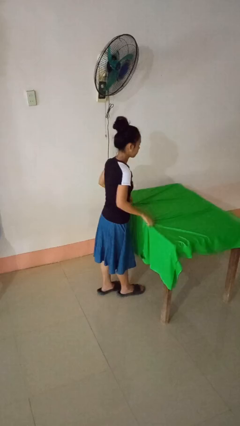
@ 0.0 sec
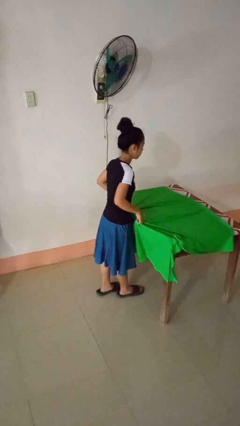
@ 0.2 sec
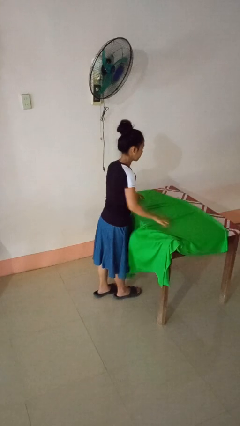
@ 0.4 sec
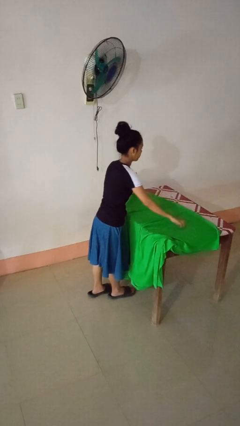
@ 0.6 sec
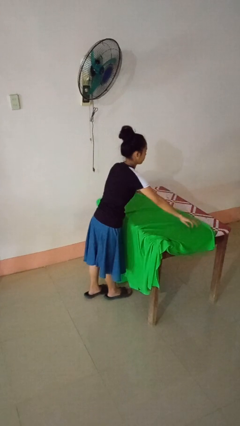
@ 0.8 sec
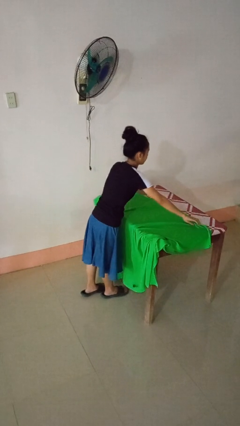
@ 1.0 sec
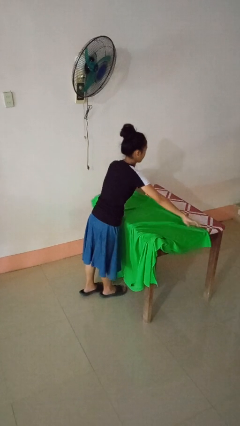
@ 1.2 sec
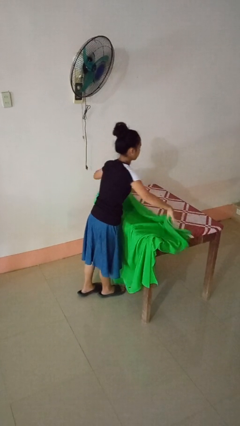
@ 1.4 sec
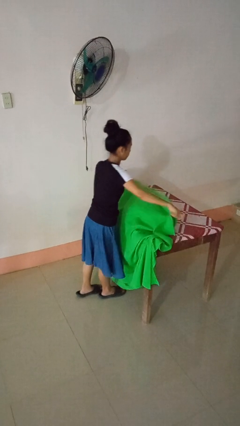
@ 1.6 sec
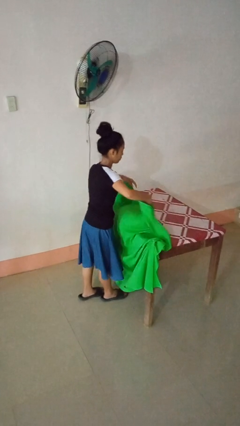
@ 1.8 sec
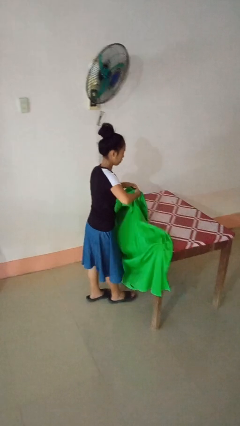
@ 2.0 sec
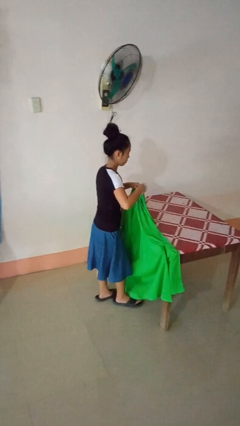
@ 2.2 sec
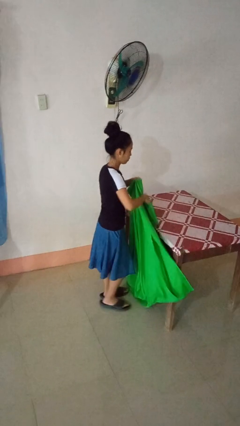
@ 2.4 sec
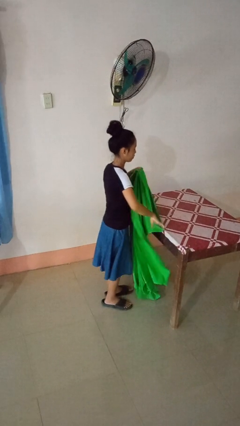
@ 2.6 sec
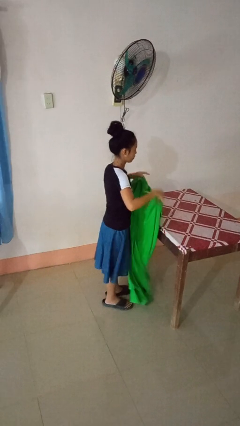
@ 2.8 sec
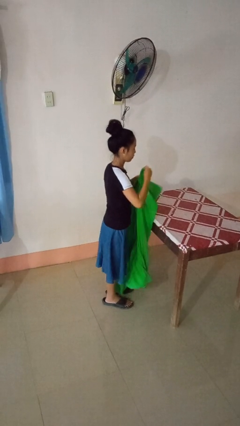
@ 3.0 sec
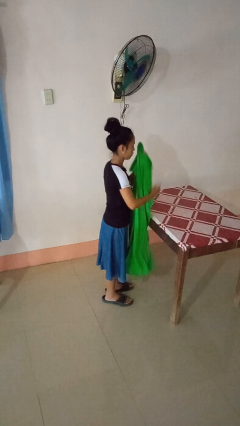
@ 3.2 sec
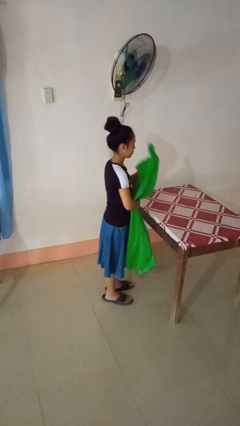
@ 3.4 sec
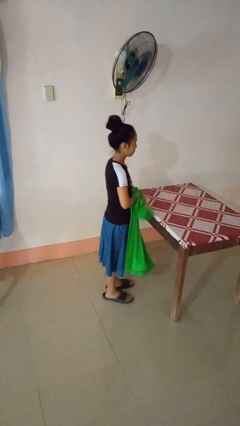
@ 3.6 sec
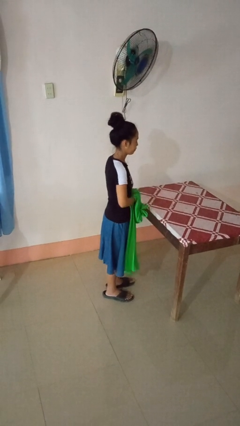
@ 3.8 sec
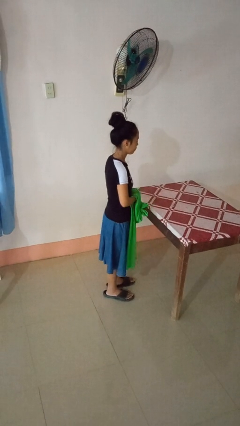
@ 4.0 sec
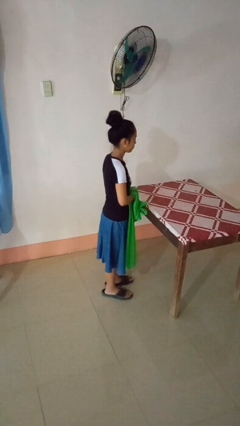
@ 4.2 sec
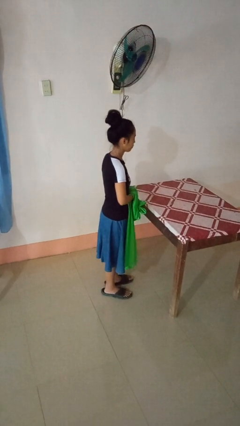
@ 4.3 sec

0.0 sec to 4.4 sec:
person folds tablecloth

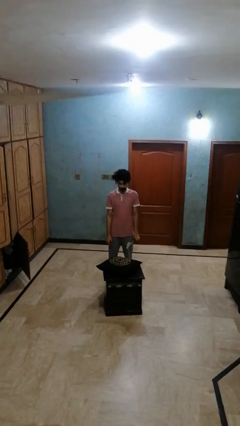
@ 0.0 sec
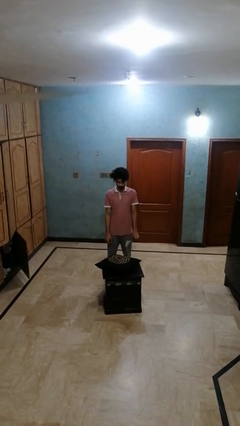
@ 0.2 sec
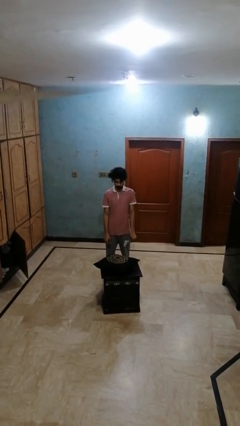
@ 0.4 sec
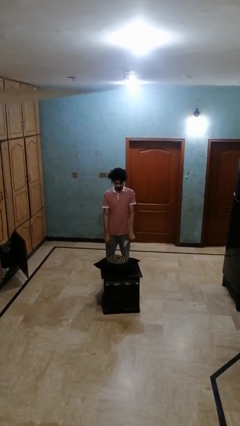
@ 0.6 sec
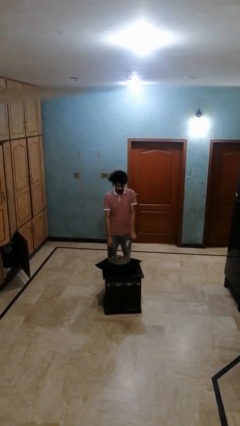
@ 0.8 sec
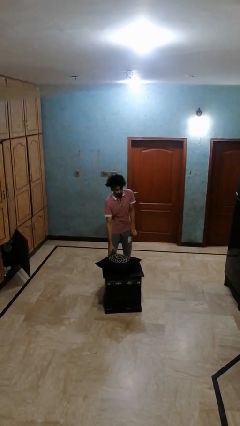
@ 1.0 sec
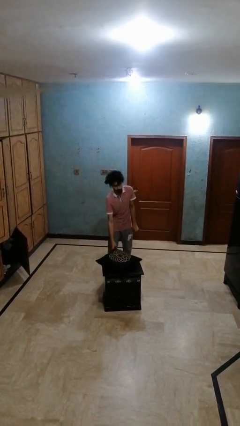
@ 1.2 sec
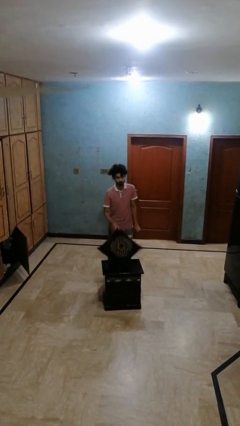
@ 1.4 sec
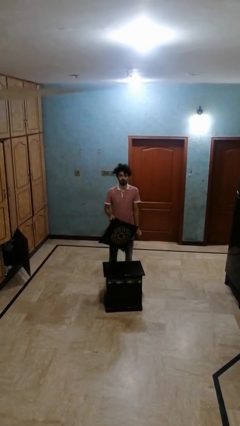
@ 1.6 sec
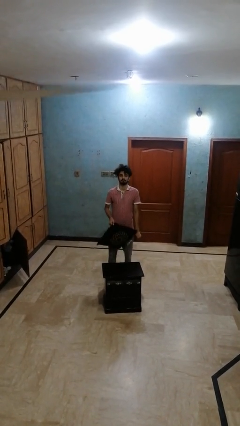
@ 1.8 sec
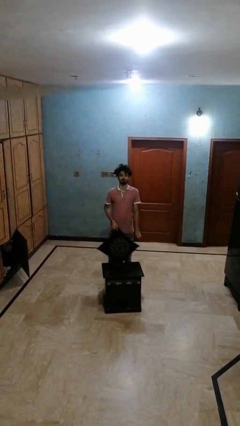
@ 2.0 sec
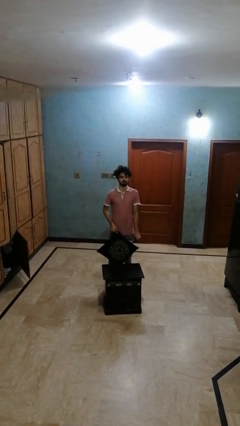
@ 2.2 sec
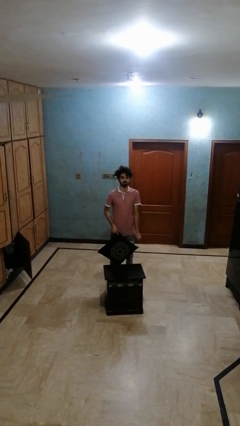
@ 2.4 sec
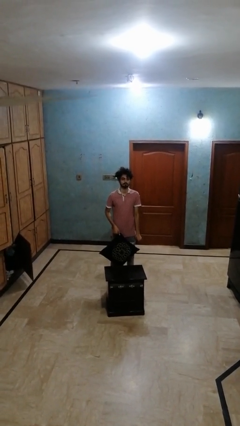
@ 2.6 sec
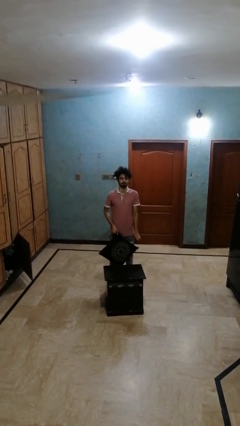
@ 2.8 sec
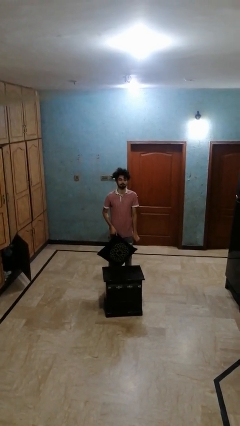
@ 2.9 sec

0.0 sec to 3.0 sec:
person picks up object from table

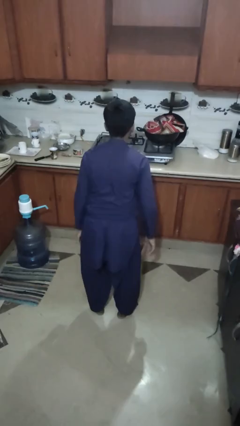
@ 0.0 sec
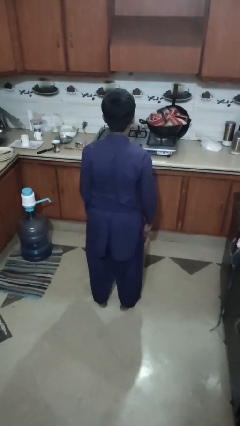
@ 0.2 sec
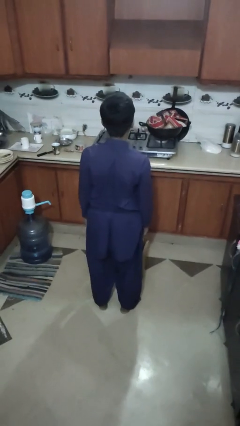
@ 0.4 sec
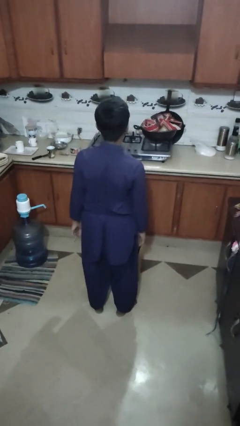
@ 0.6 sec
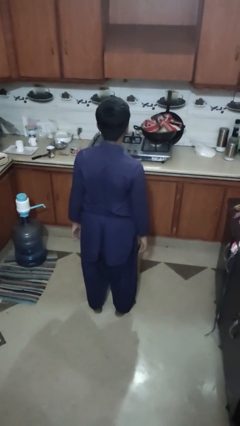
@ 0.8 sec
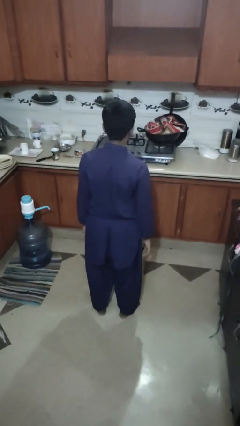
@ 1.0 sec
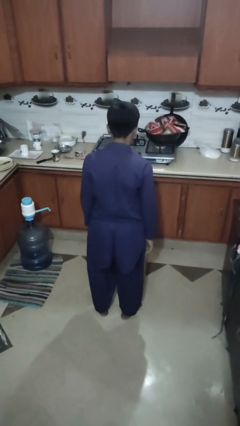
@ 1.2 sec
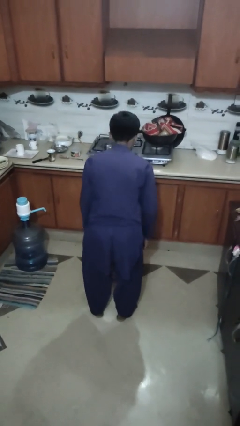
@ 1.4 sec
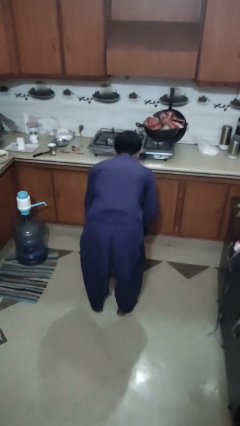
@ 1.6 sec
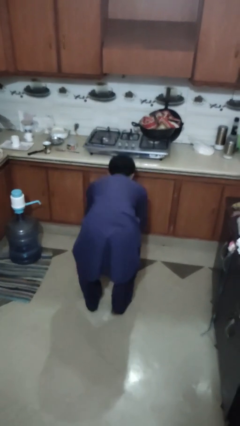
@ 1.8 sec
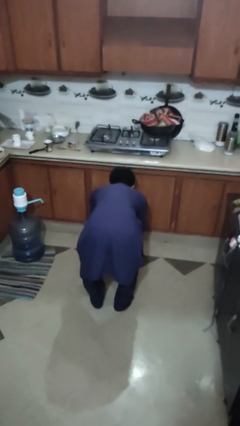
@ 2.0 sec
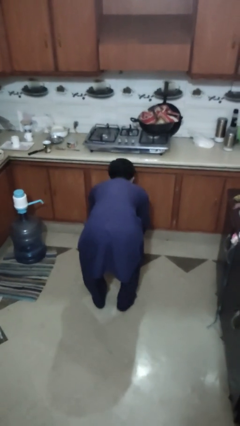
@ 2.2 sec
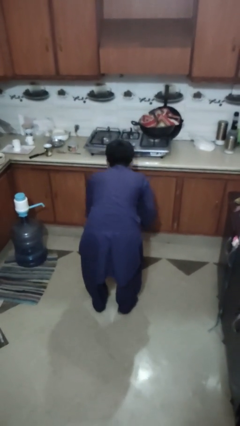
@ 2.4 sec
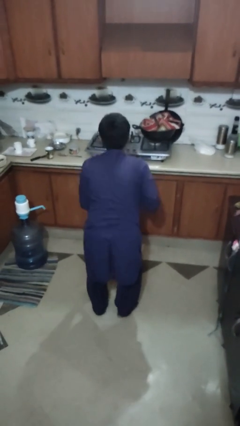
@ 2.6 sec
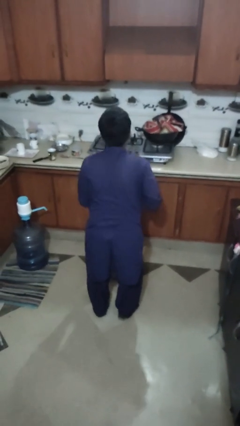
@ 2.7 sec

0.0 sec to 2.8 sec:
person takes object from box

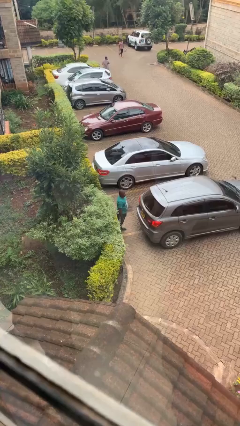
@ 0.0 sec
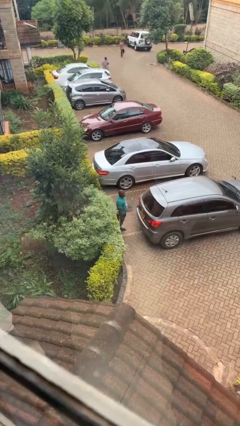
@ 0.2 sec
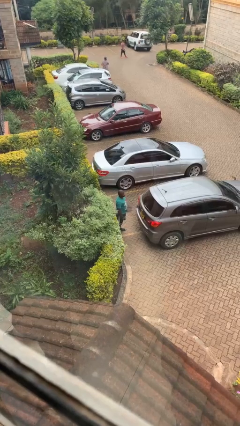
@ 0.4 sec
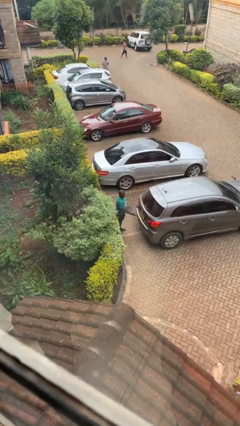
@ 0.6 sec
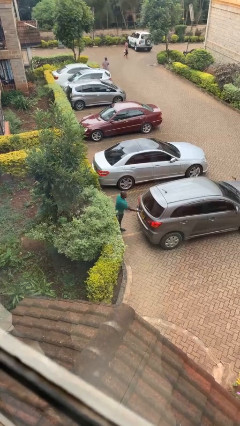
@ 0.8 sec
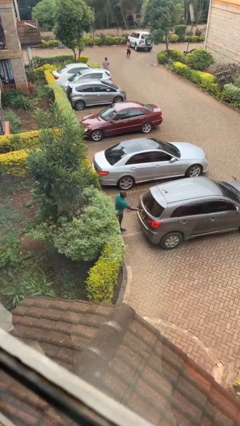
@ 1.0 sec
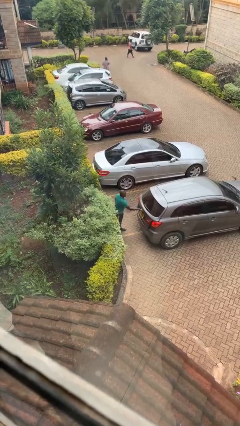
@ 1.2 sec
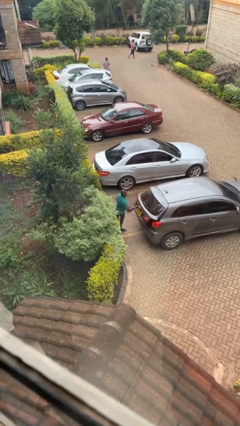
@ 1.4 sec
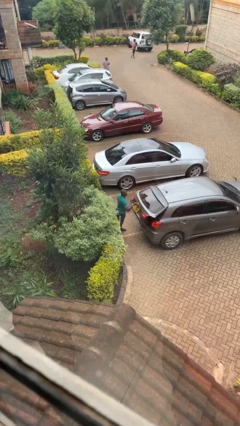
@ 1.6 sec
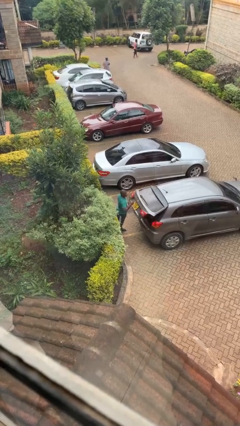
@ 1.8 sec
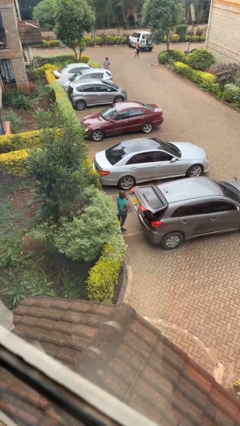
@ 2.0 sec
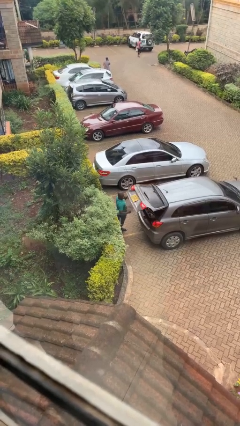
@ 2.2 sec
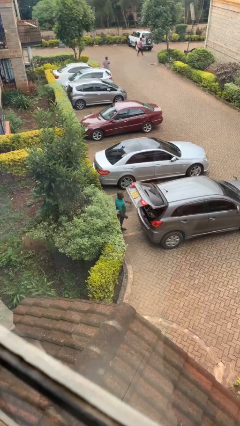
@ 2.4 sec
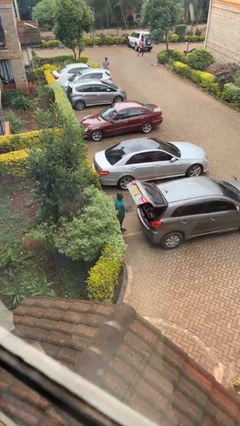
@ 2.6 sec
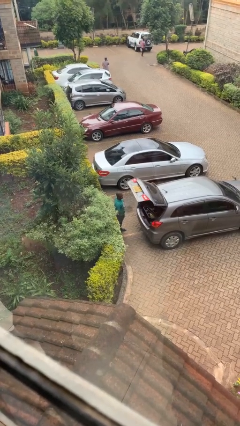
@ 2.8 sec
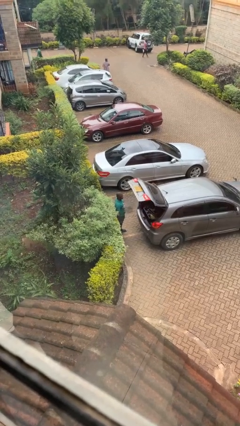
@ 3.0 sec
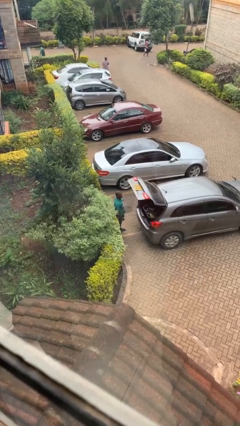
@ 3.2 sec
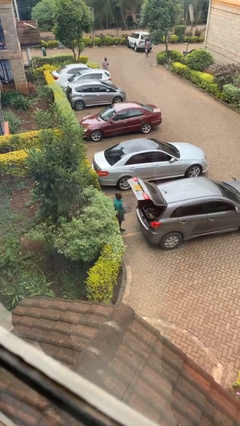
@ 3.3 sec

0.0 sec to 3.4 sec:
person opens car trunk

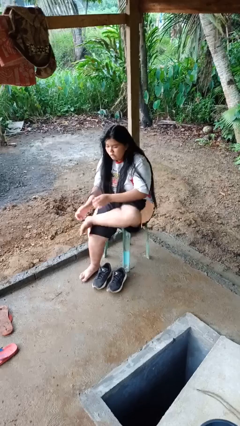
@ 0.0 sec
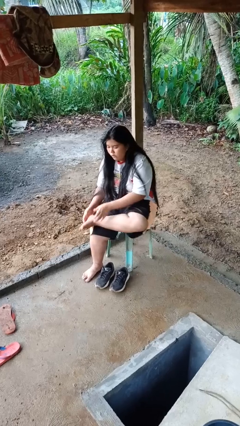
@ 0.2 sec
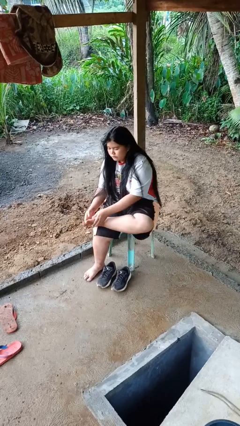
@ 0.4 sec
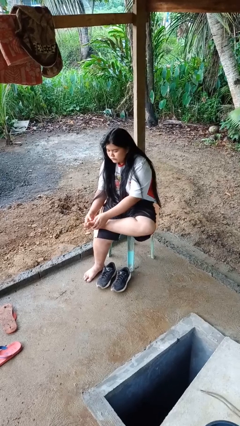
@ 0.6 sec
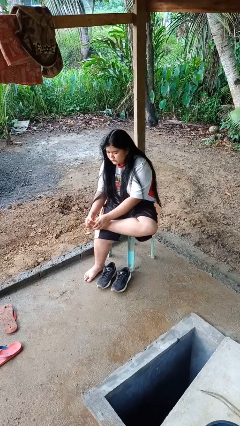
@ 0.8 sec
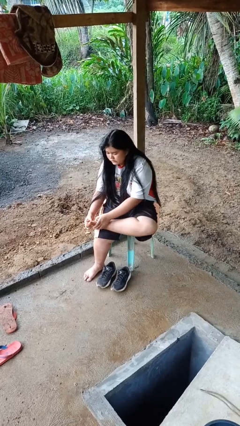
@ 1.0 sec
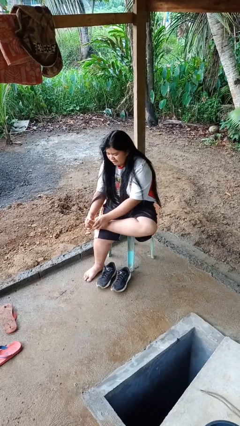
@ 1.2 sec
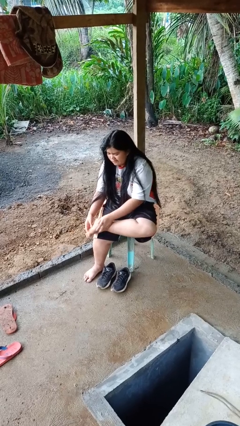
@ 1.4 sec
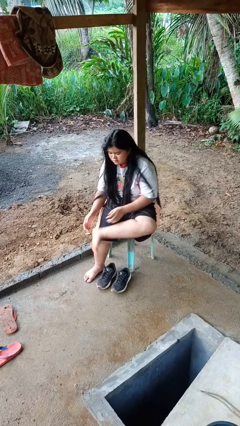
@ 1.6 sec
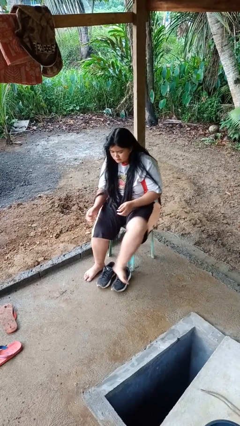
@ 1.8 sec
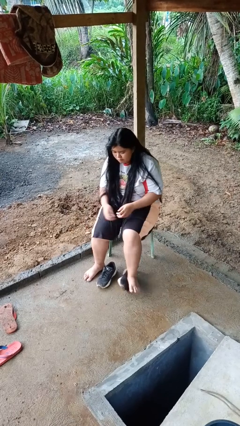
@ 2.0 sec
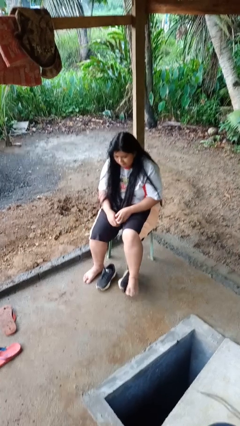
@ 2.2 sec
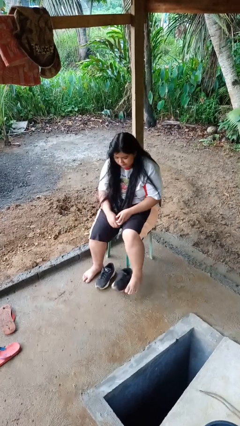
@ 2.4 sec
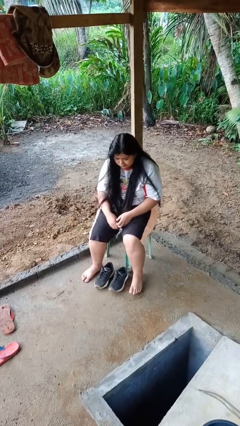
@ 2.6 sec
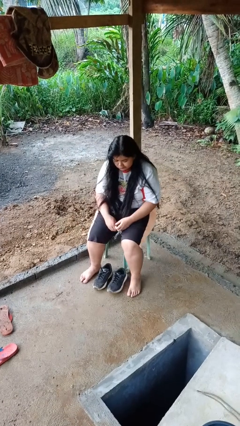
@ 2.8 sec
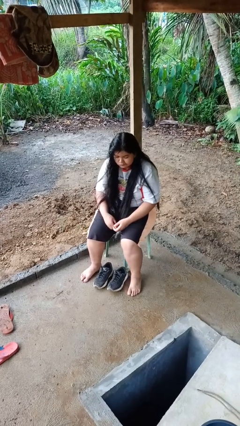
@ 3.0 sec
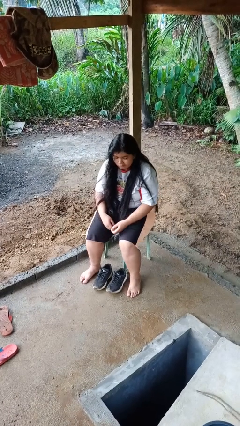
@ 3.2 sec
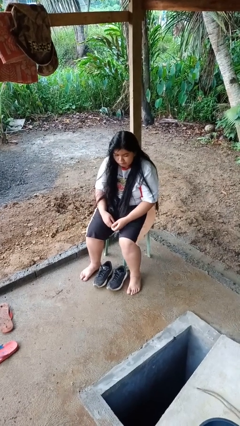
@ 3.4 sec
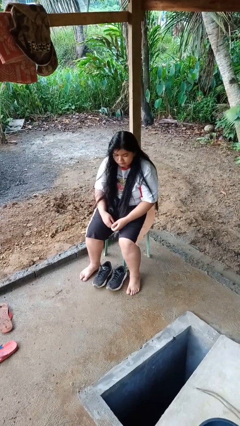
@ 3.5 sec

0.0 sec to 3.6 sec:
person rubs foot

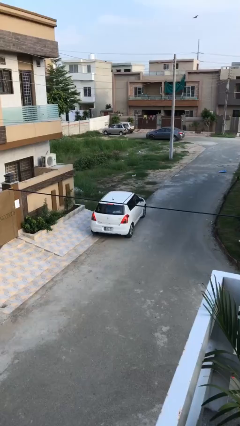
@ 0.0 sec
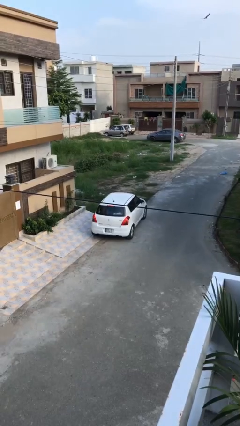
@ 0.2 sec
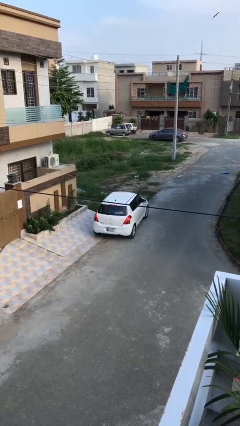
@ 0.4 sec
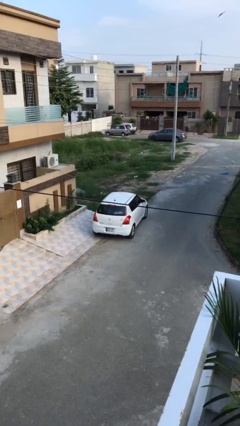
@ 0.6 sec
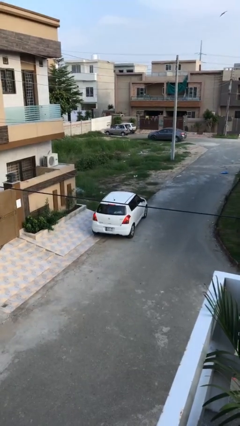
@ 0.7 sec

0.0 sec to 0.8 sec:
car drops off person
